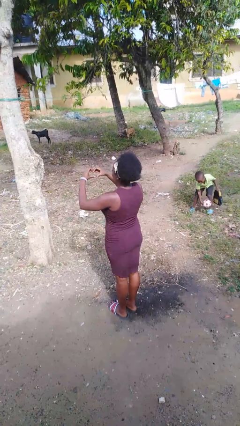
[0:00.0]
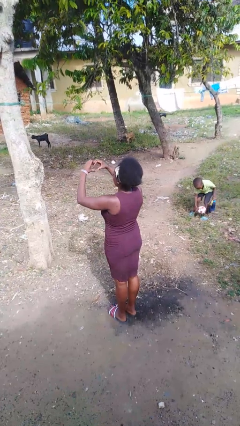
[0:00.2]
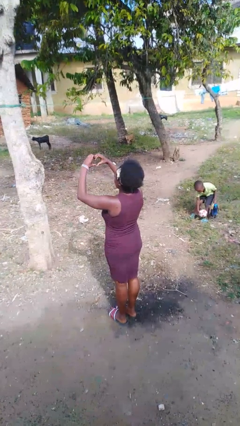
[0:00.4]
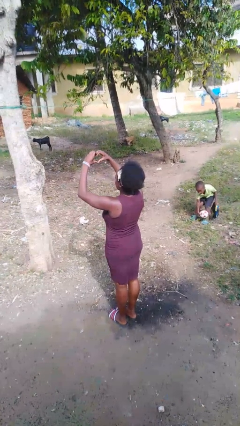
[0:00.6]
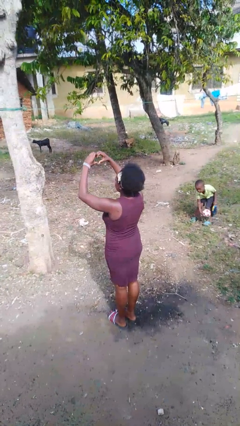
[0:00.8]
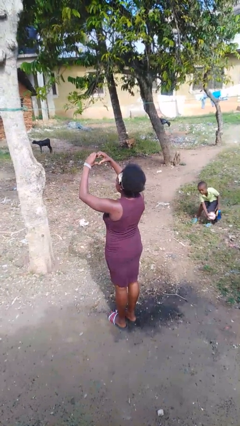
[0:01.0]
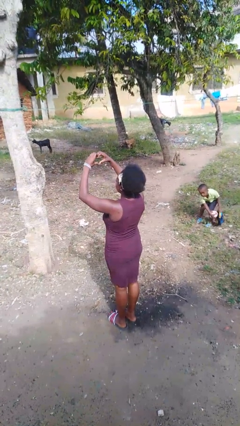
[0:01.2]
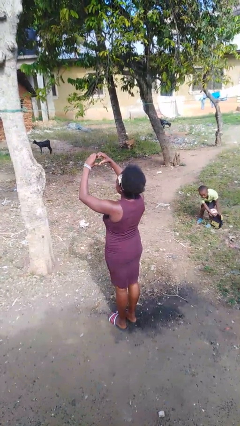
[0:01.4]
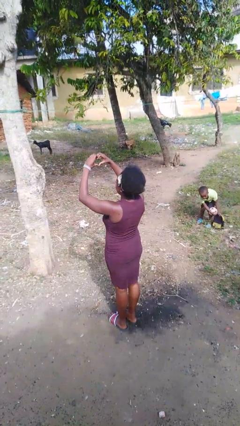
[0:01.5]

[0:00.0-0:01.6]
person gestures heart

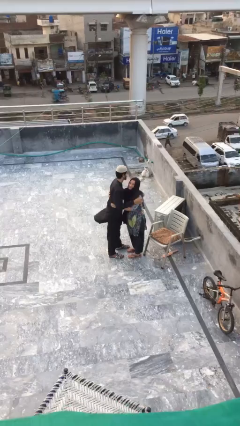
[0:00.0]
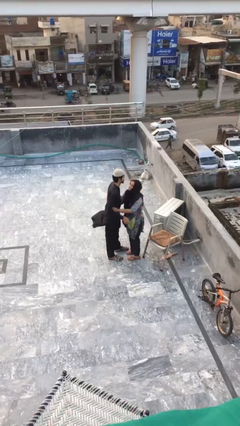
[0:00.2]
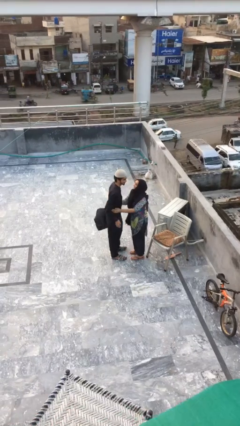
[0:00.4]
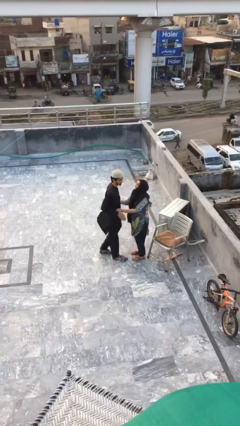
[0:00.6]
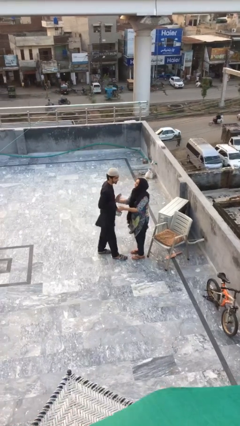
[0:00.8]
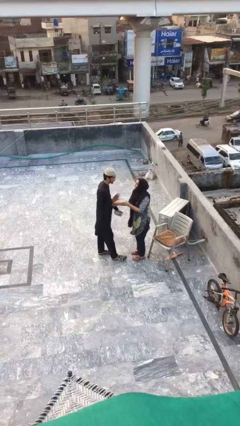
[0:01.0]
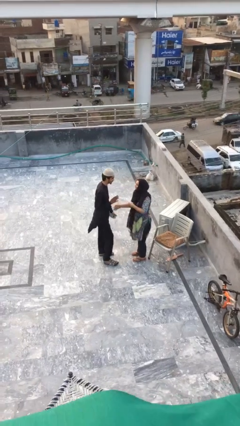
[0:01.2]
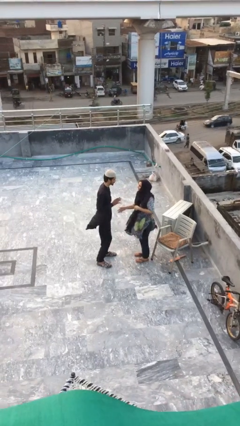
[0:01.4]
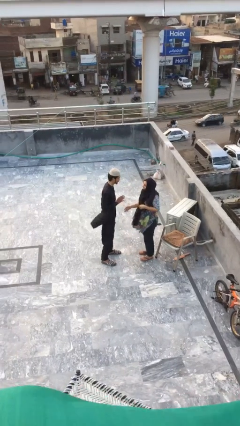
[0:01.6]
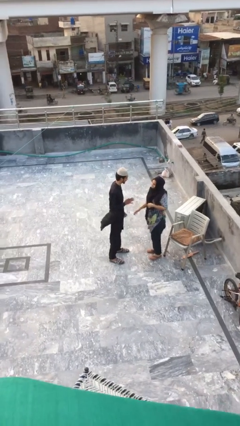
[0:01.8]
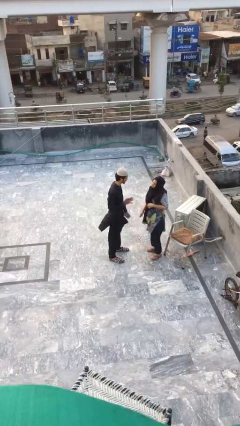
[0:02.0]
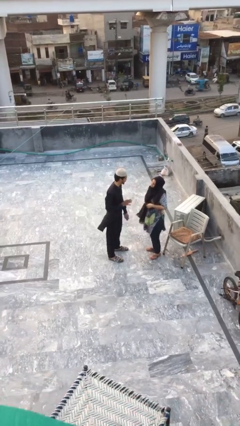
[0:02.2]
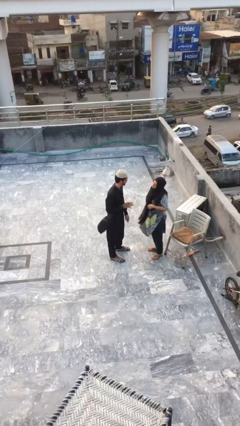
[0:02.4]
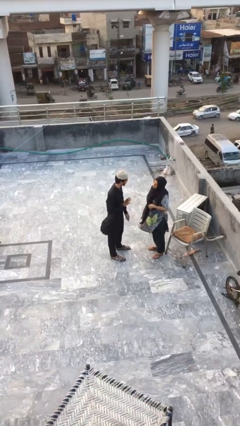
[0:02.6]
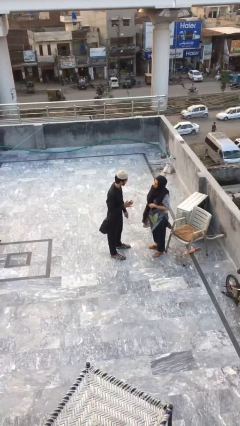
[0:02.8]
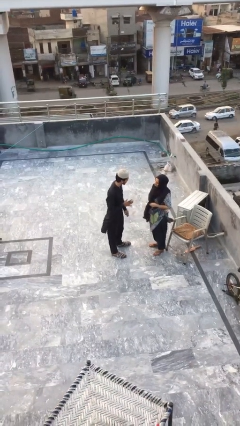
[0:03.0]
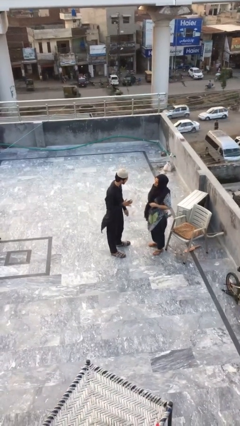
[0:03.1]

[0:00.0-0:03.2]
person talks to person

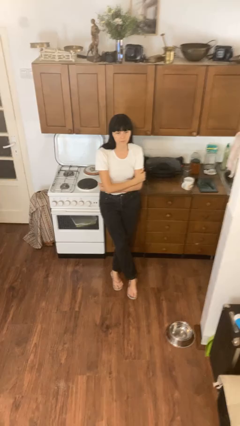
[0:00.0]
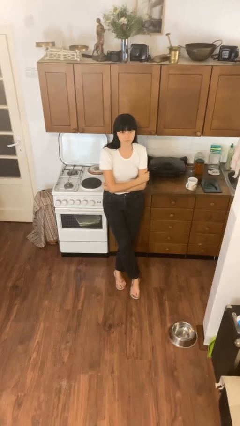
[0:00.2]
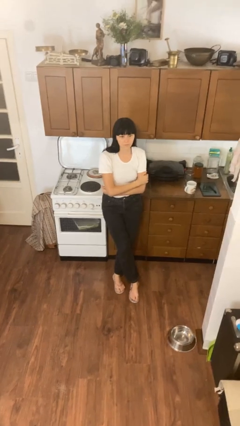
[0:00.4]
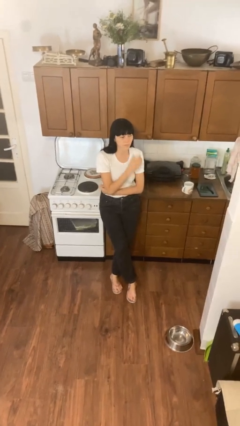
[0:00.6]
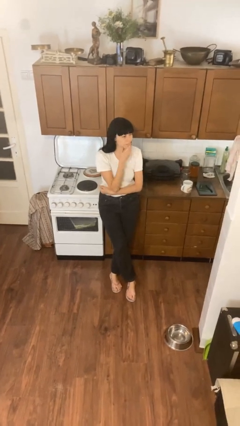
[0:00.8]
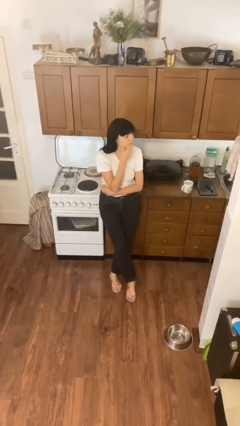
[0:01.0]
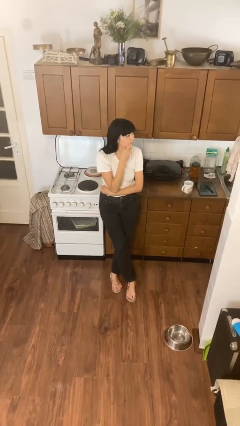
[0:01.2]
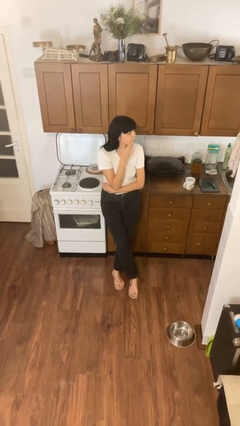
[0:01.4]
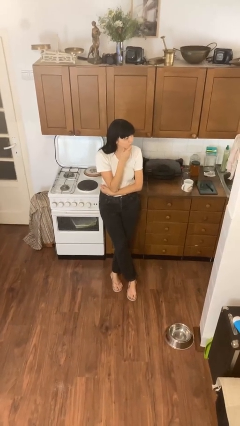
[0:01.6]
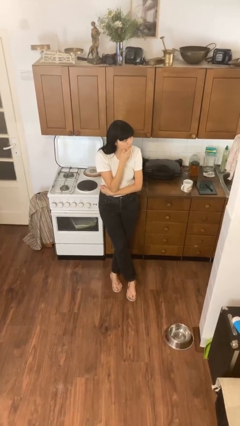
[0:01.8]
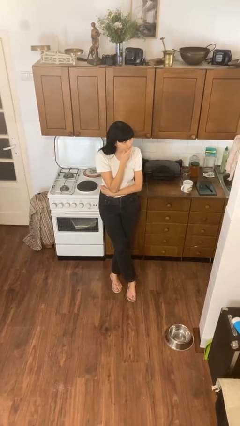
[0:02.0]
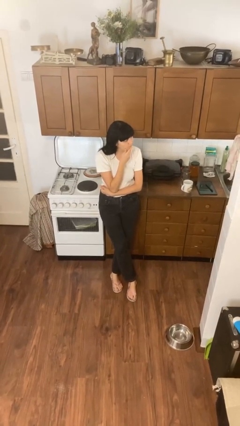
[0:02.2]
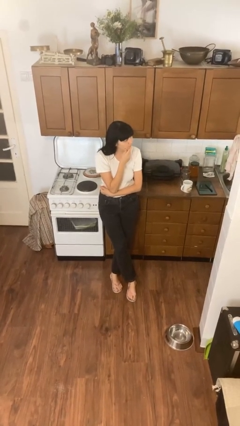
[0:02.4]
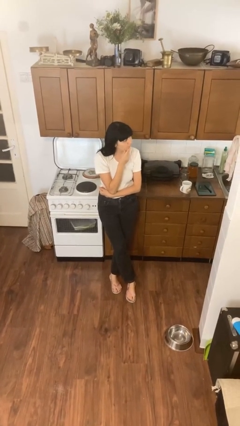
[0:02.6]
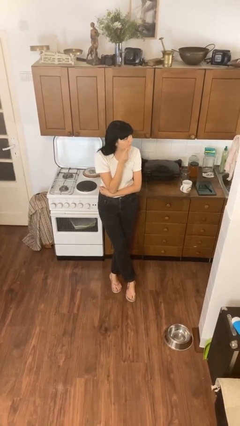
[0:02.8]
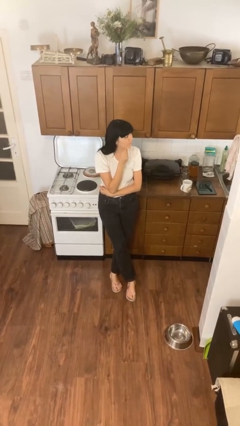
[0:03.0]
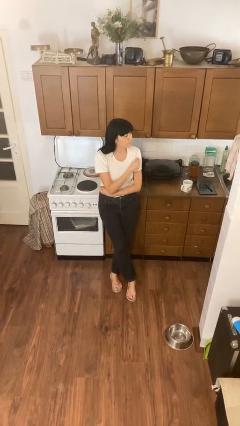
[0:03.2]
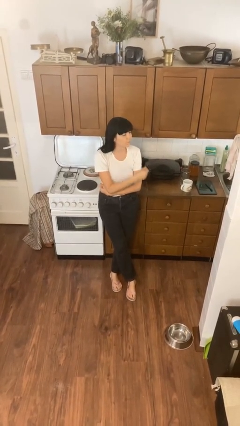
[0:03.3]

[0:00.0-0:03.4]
person strokes chin

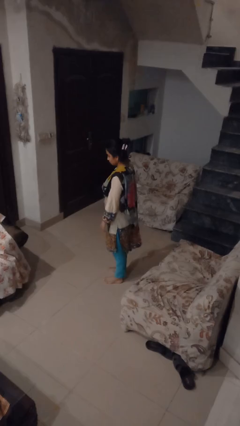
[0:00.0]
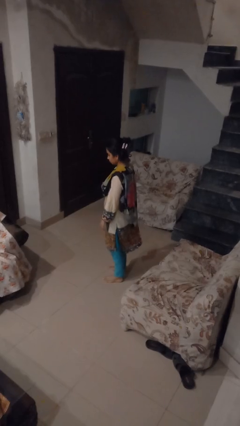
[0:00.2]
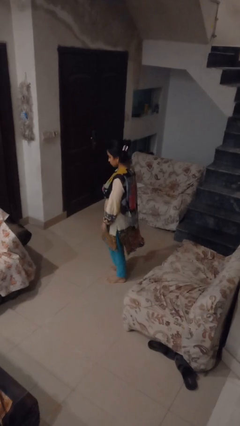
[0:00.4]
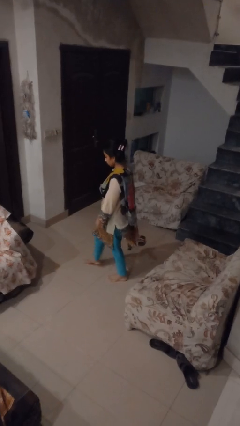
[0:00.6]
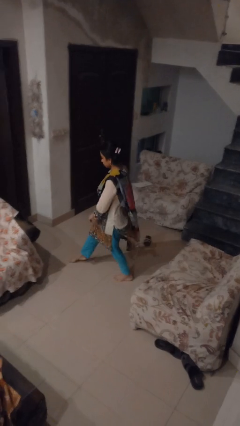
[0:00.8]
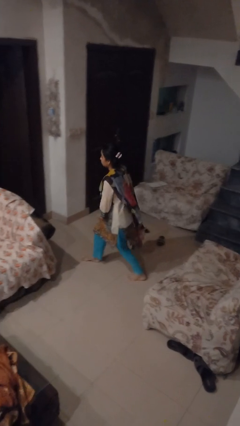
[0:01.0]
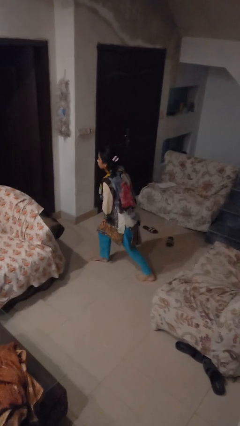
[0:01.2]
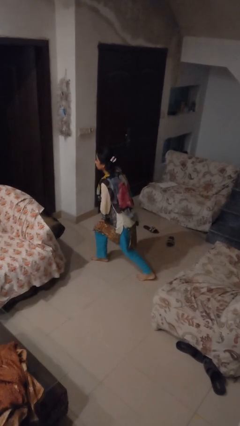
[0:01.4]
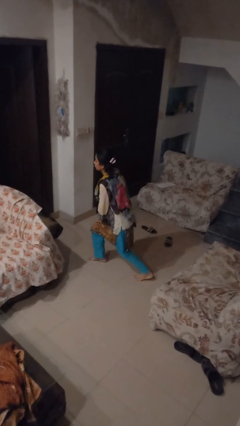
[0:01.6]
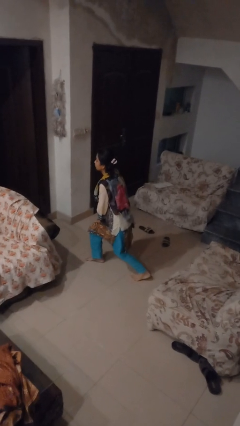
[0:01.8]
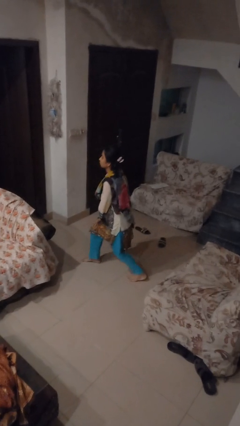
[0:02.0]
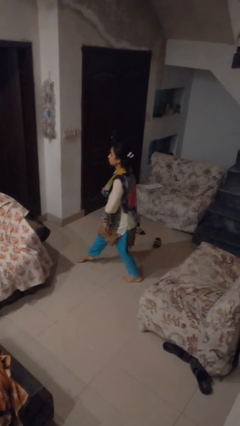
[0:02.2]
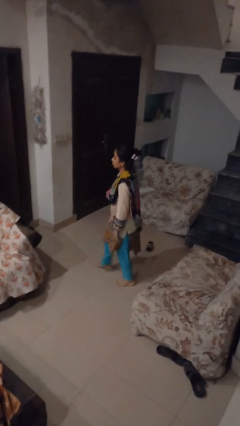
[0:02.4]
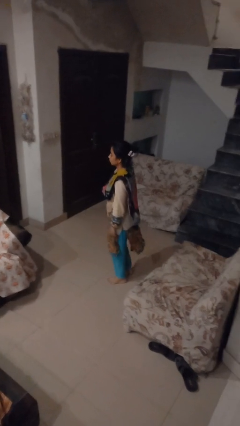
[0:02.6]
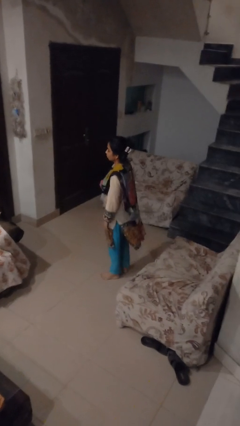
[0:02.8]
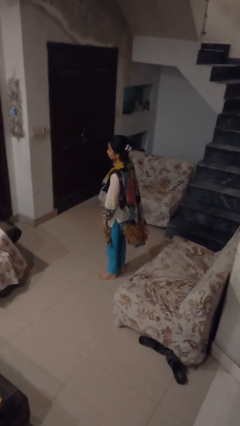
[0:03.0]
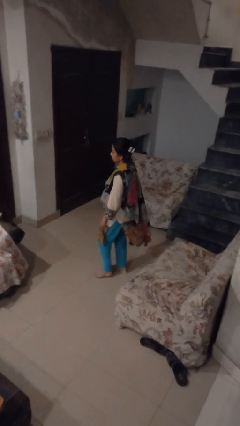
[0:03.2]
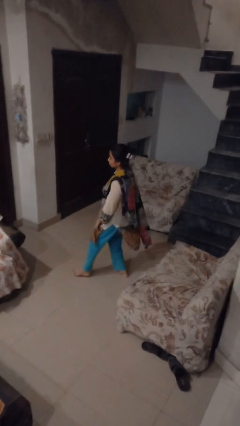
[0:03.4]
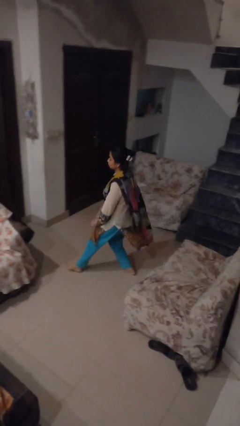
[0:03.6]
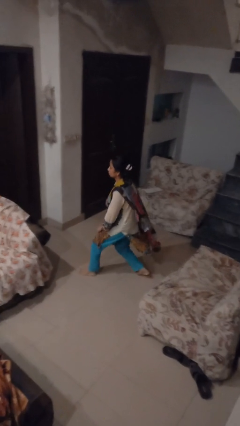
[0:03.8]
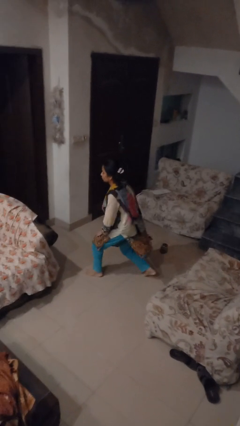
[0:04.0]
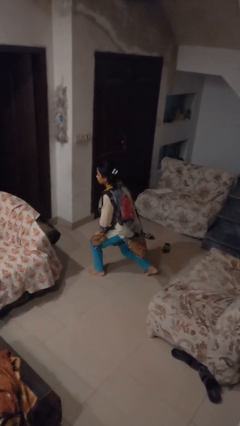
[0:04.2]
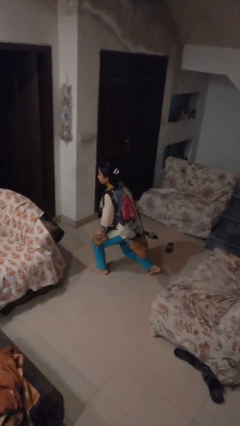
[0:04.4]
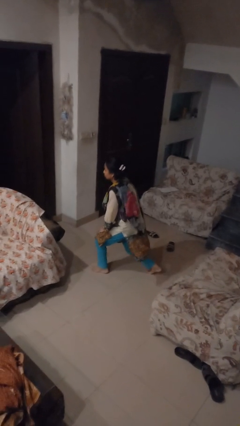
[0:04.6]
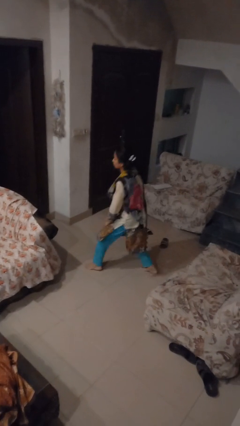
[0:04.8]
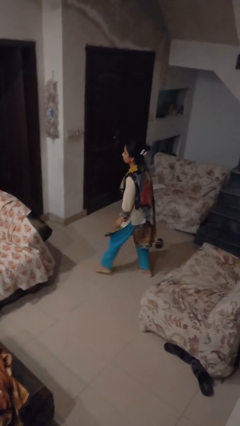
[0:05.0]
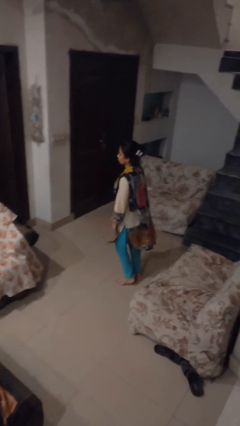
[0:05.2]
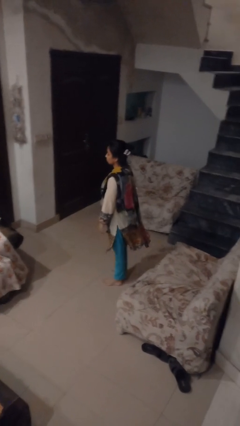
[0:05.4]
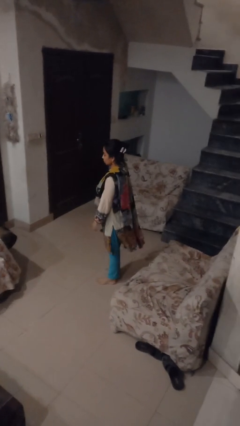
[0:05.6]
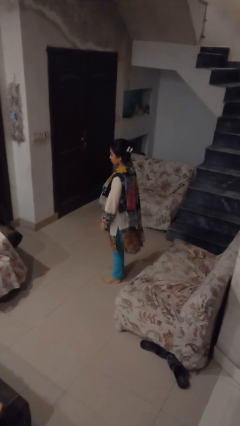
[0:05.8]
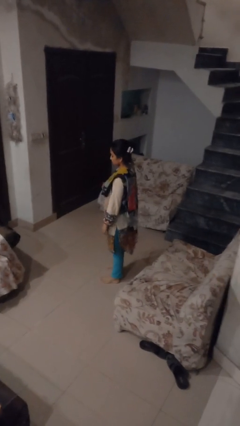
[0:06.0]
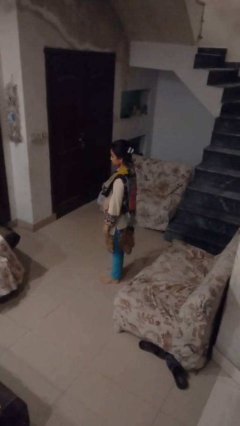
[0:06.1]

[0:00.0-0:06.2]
person exercises with lunges

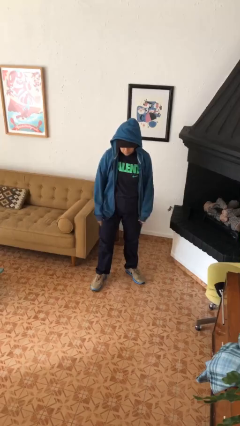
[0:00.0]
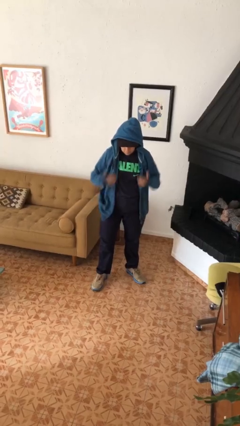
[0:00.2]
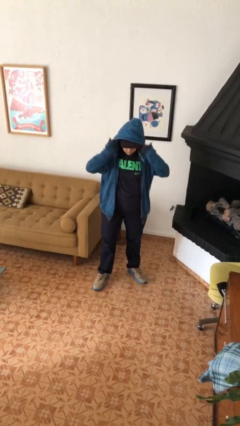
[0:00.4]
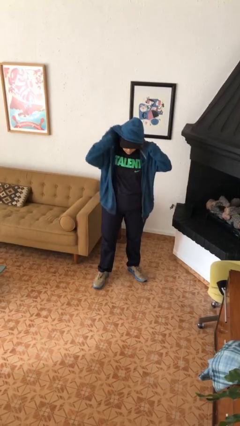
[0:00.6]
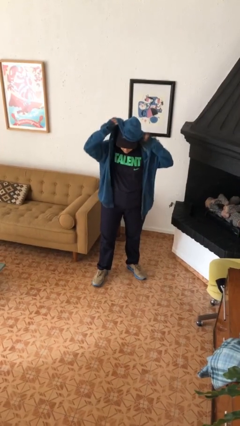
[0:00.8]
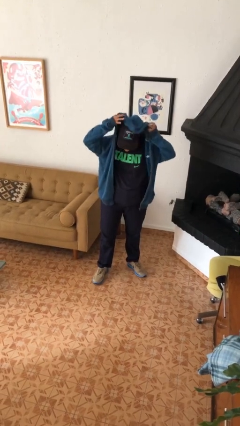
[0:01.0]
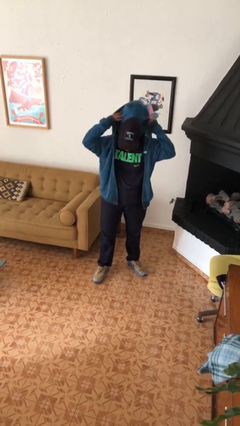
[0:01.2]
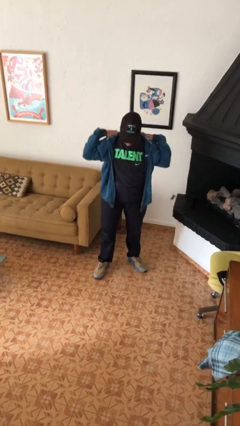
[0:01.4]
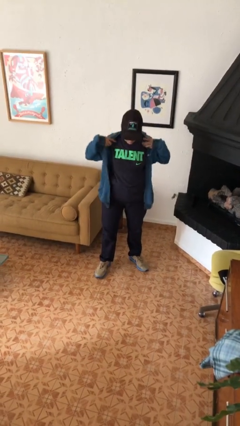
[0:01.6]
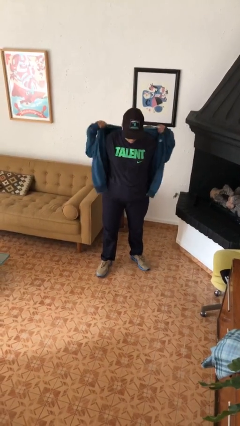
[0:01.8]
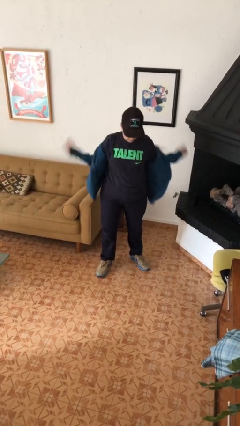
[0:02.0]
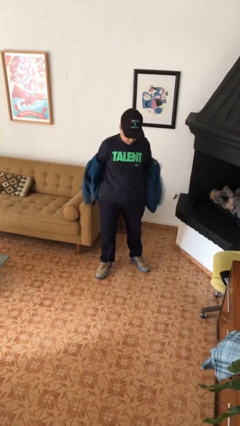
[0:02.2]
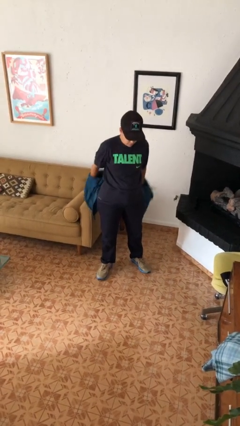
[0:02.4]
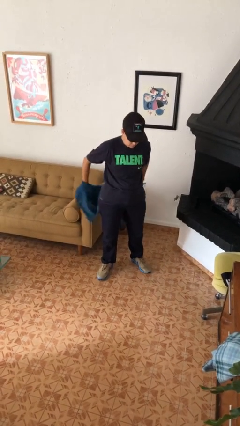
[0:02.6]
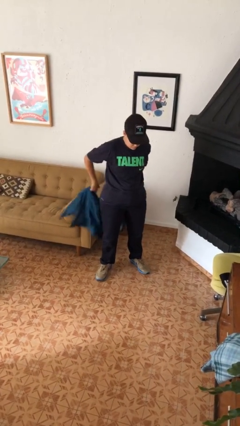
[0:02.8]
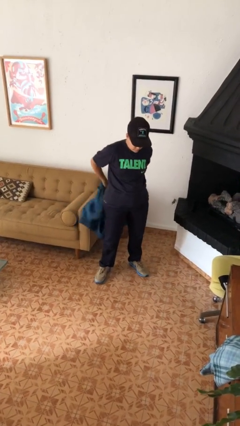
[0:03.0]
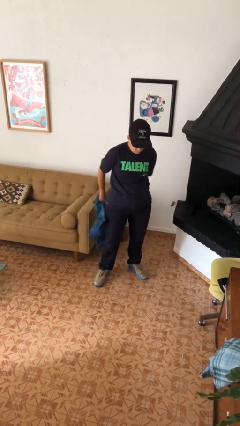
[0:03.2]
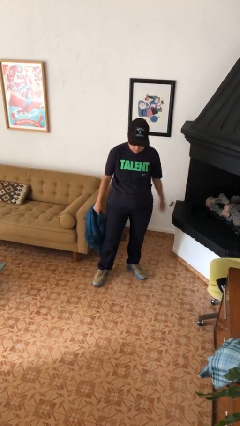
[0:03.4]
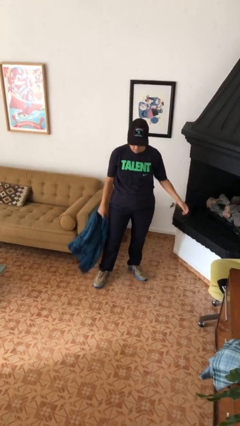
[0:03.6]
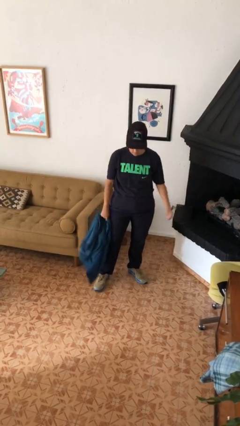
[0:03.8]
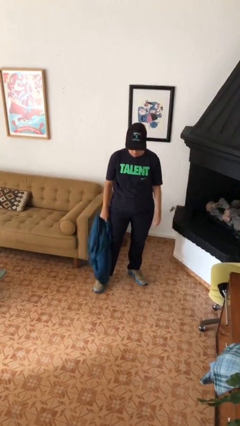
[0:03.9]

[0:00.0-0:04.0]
person takes off hoodie
